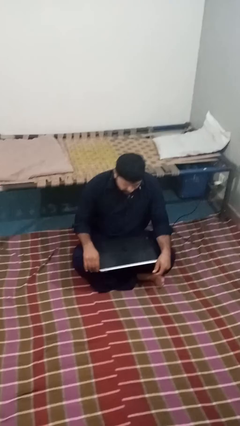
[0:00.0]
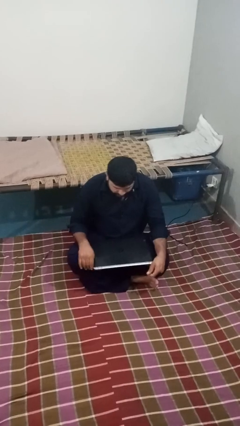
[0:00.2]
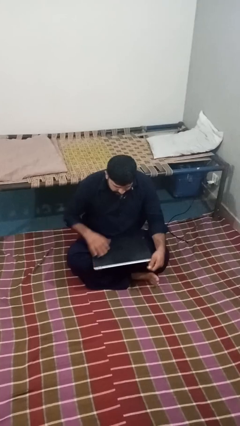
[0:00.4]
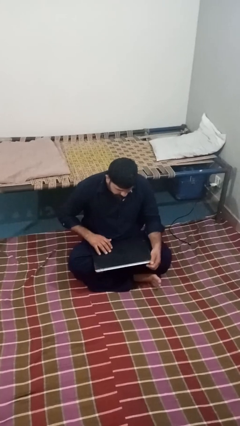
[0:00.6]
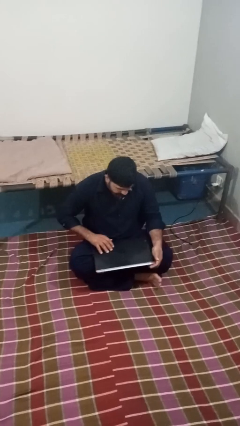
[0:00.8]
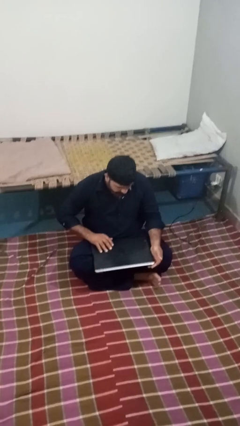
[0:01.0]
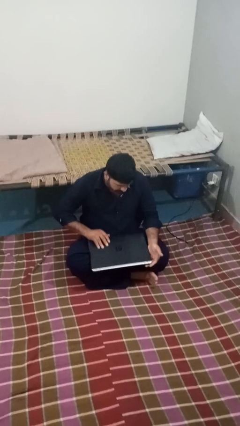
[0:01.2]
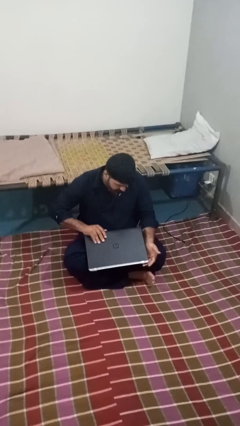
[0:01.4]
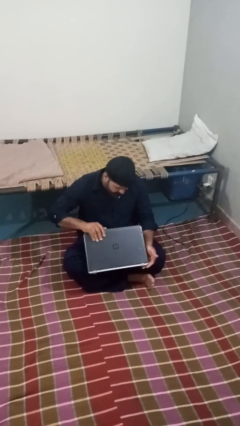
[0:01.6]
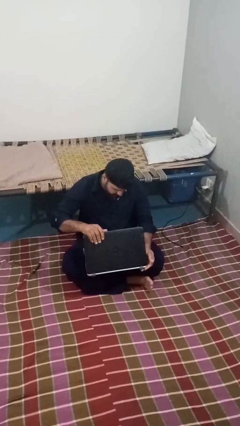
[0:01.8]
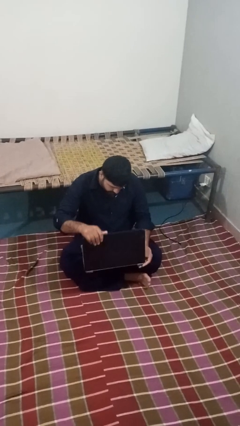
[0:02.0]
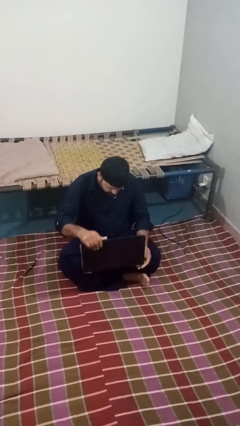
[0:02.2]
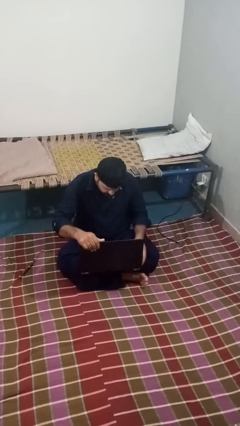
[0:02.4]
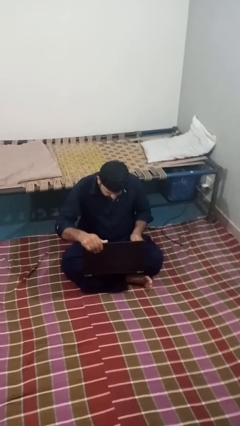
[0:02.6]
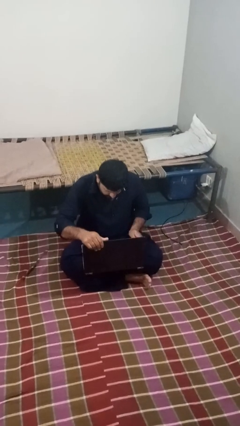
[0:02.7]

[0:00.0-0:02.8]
person opens laptop

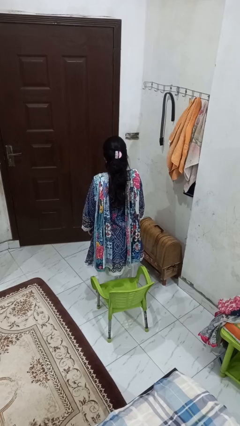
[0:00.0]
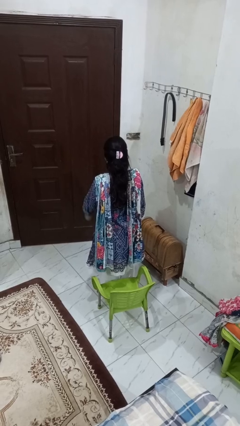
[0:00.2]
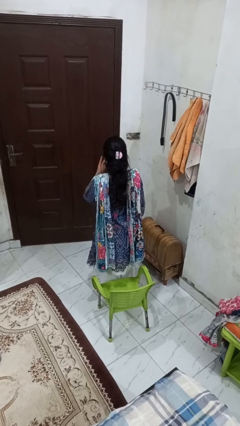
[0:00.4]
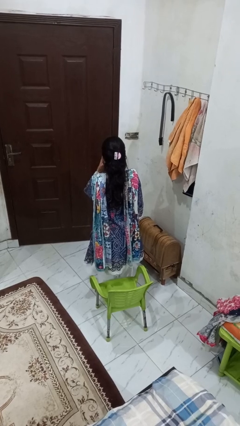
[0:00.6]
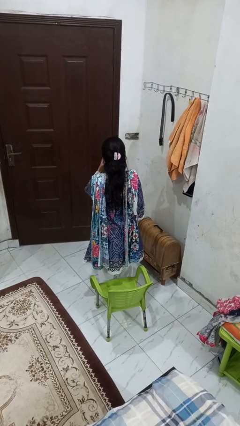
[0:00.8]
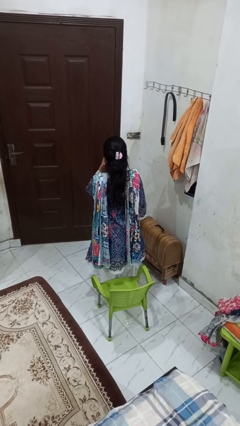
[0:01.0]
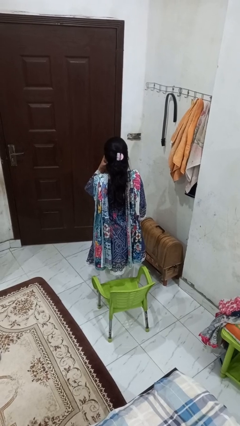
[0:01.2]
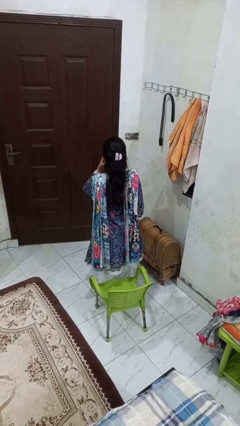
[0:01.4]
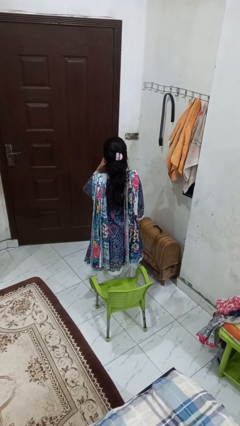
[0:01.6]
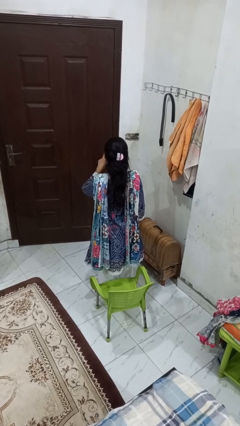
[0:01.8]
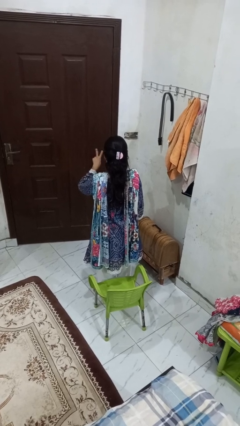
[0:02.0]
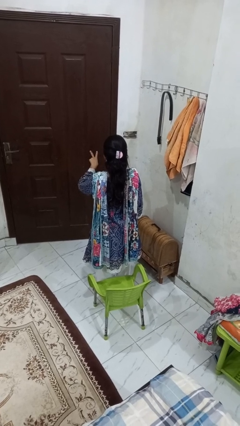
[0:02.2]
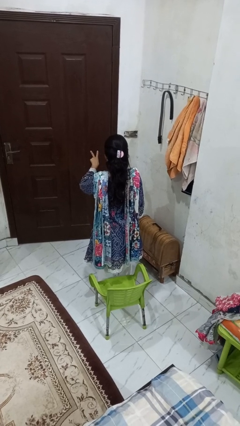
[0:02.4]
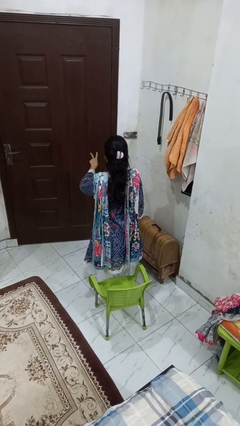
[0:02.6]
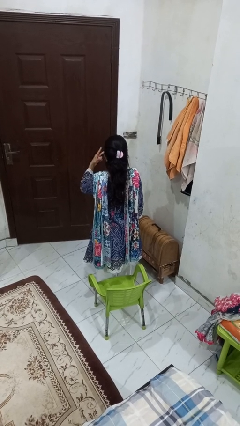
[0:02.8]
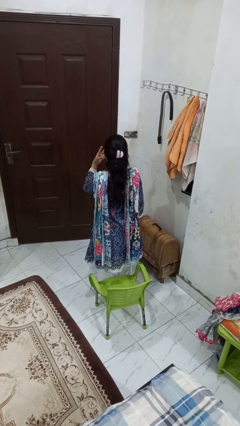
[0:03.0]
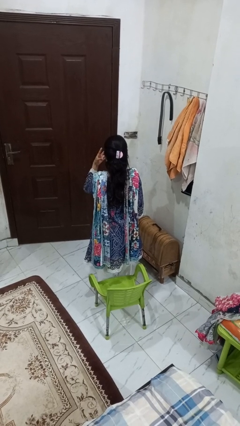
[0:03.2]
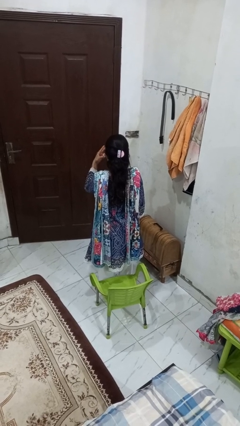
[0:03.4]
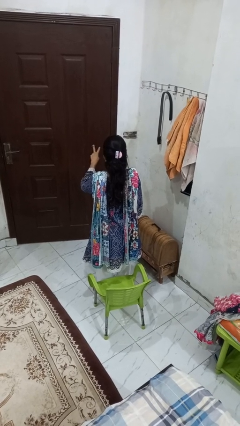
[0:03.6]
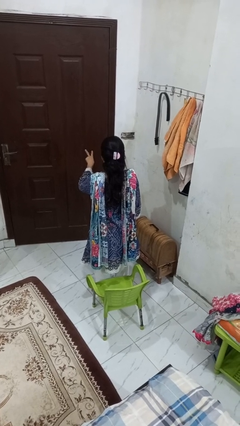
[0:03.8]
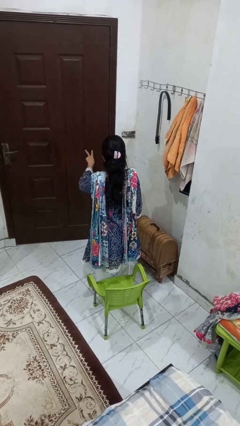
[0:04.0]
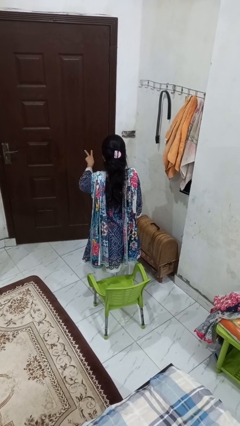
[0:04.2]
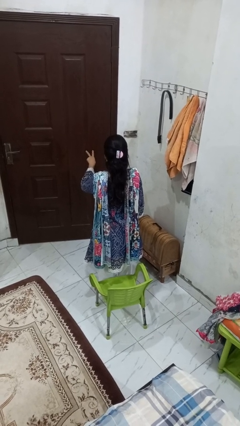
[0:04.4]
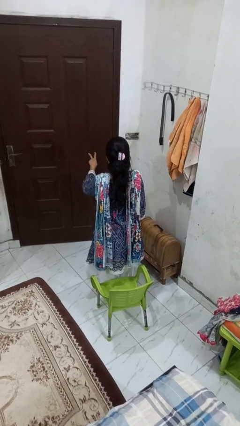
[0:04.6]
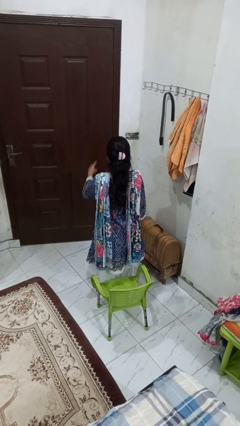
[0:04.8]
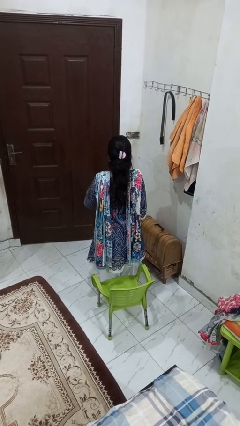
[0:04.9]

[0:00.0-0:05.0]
person gestures watch closely

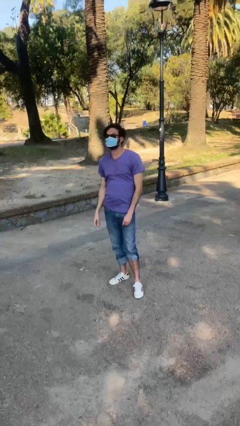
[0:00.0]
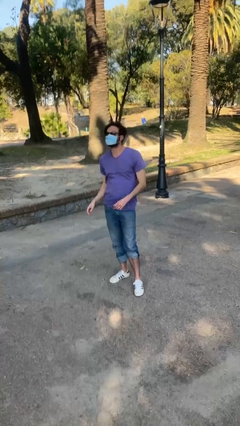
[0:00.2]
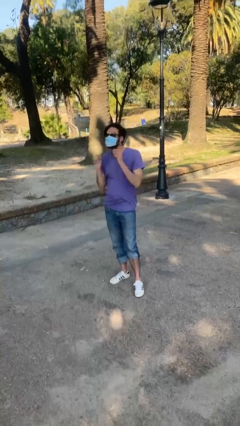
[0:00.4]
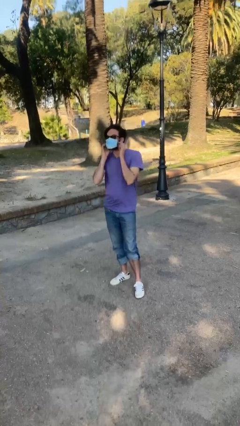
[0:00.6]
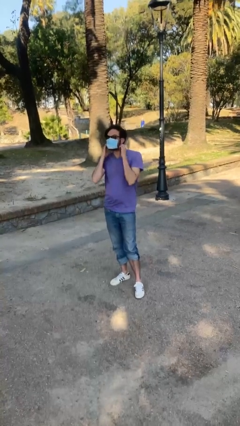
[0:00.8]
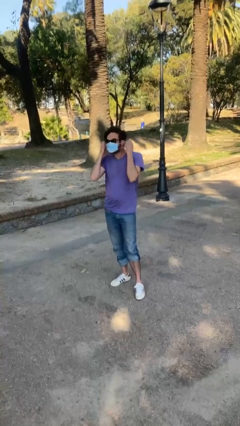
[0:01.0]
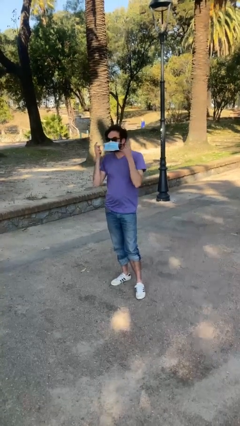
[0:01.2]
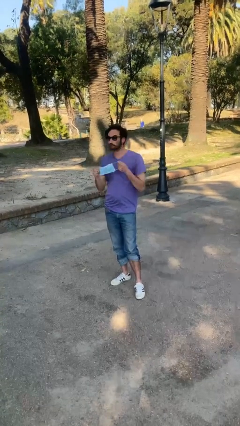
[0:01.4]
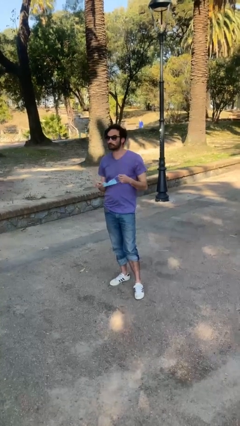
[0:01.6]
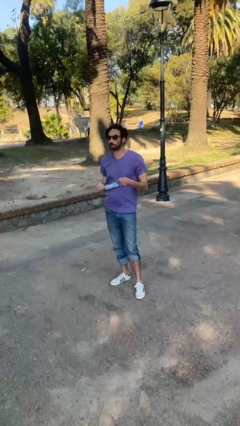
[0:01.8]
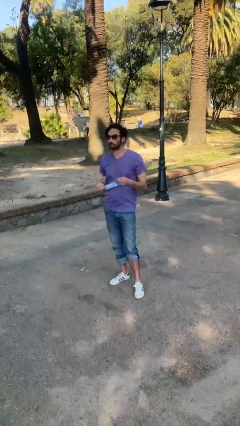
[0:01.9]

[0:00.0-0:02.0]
person takes off facemask

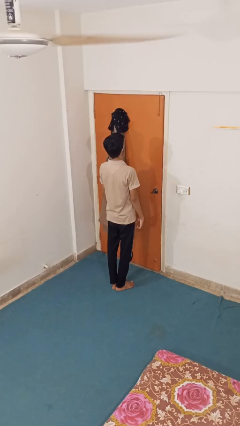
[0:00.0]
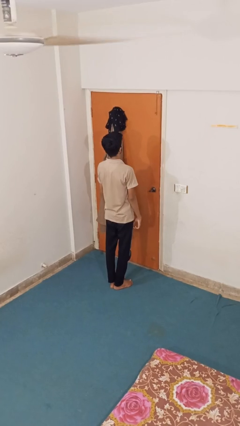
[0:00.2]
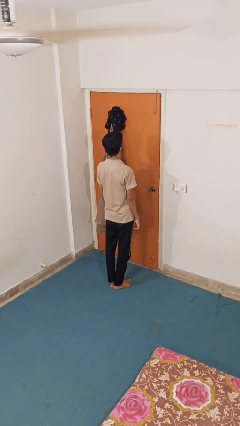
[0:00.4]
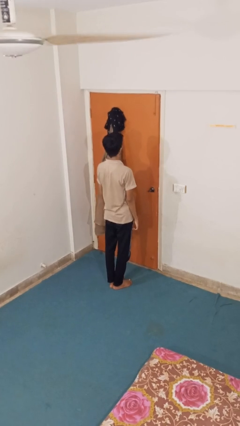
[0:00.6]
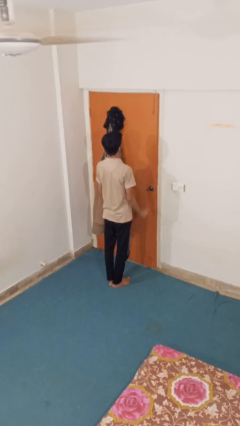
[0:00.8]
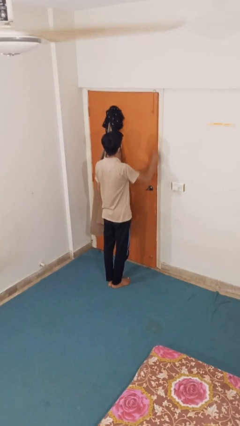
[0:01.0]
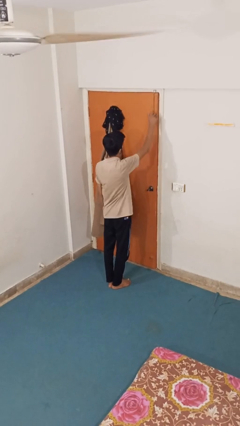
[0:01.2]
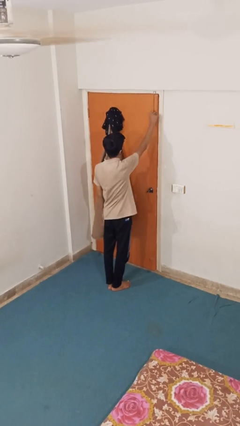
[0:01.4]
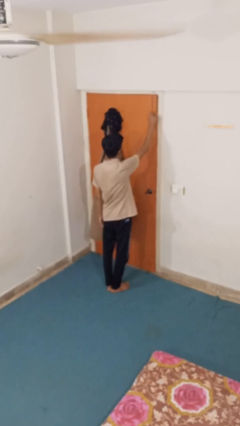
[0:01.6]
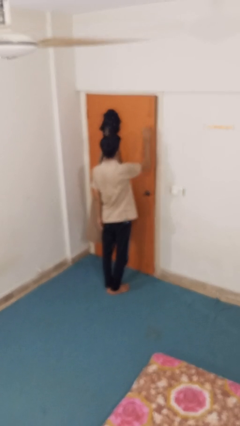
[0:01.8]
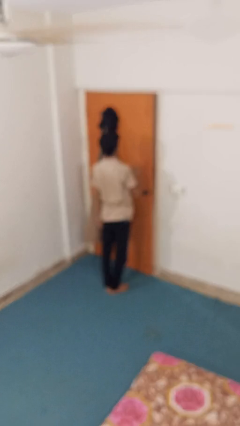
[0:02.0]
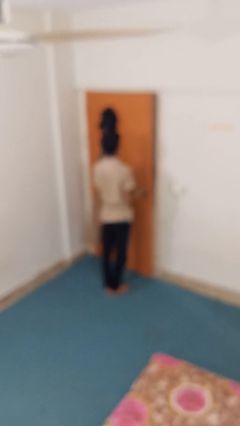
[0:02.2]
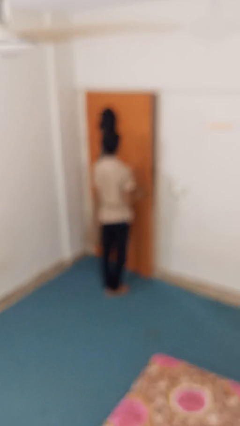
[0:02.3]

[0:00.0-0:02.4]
person unlocks door with keys

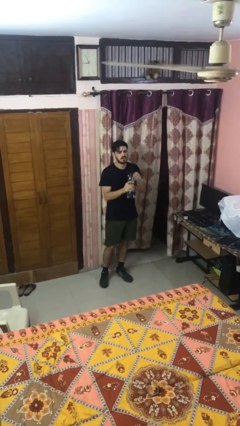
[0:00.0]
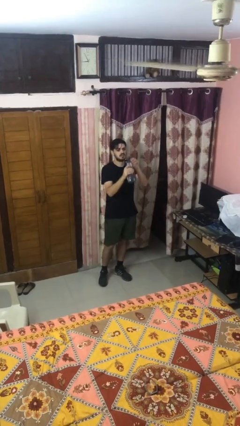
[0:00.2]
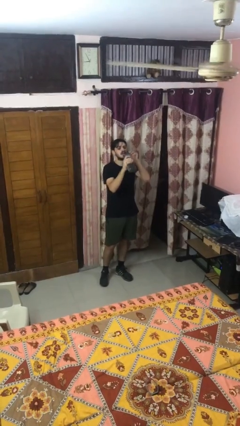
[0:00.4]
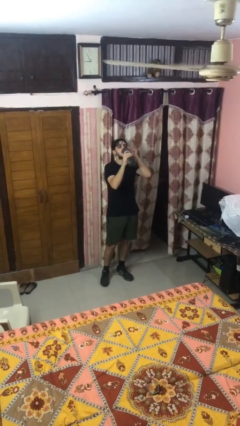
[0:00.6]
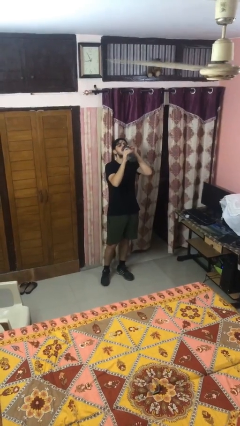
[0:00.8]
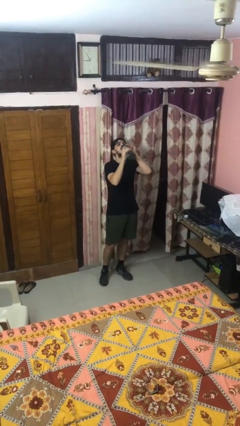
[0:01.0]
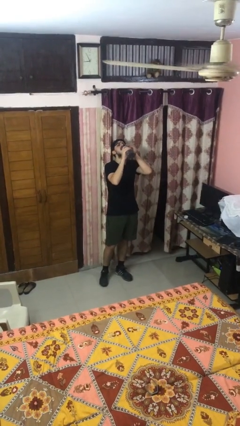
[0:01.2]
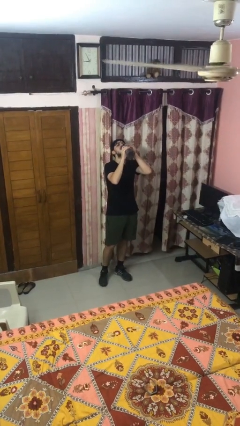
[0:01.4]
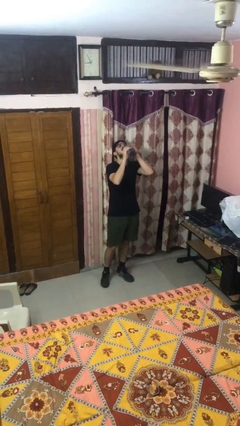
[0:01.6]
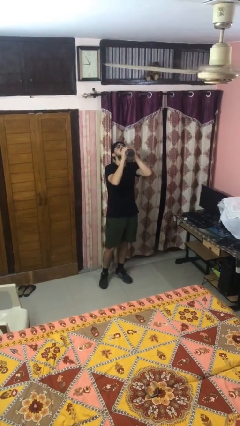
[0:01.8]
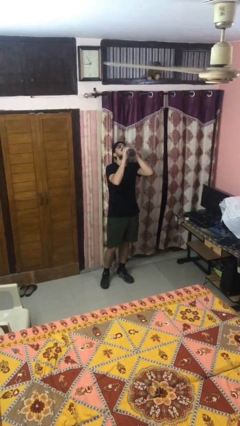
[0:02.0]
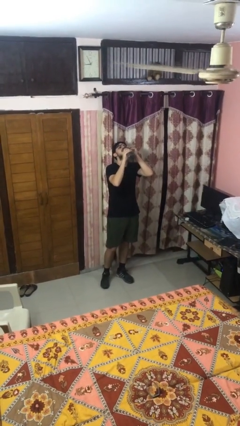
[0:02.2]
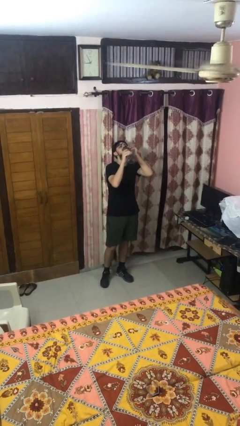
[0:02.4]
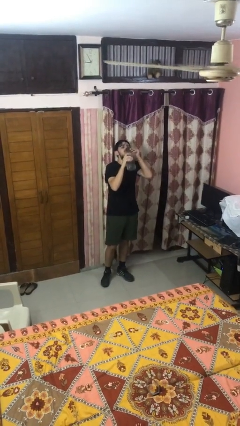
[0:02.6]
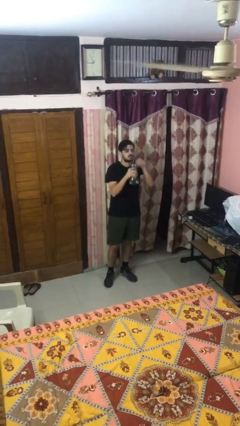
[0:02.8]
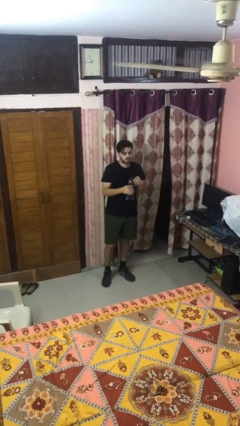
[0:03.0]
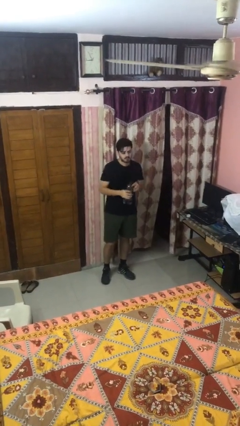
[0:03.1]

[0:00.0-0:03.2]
person drinks from bottle

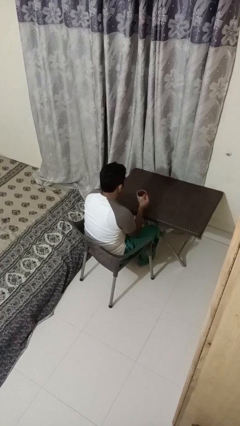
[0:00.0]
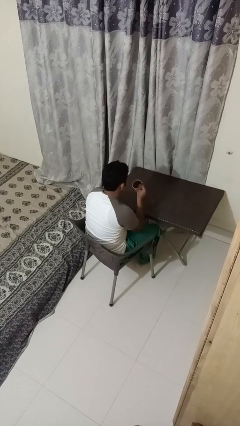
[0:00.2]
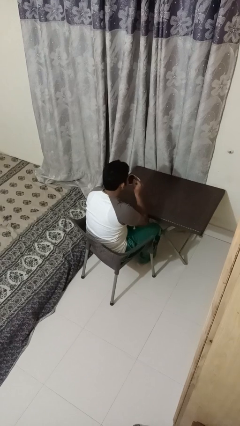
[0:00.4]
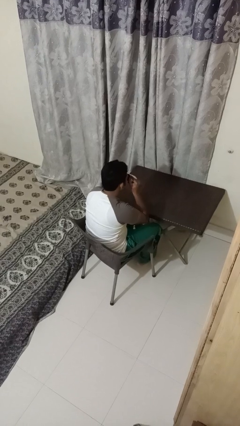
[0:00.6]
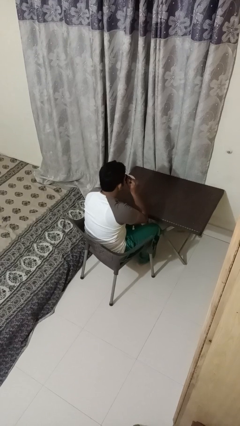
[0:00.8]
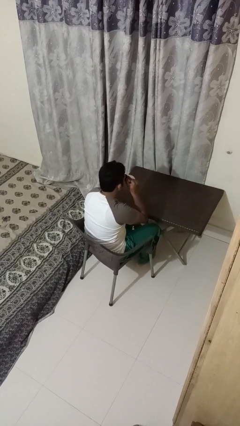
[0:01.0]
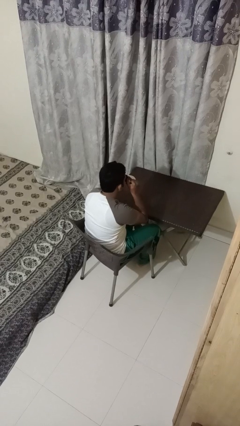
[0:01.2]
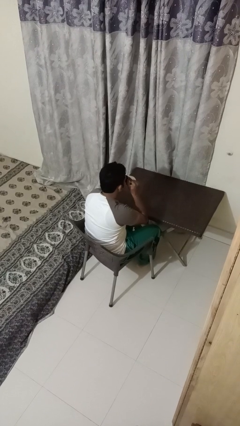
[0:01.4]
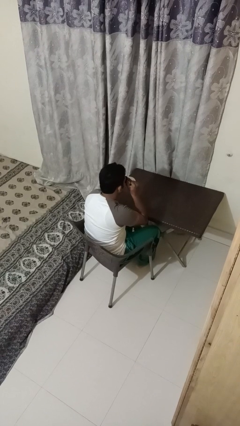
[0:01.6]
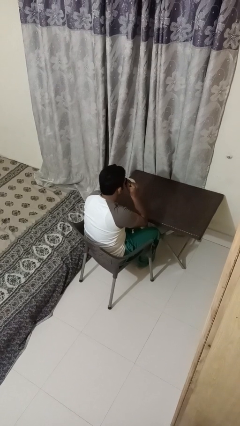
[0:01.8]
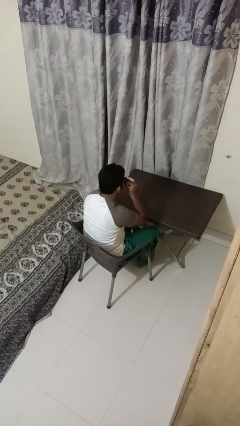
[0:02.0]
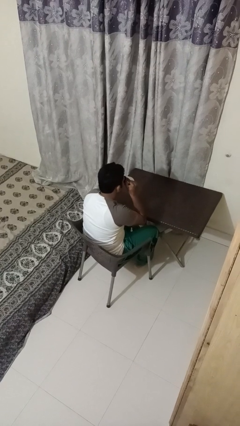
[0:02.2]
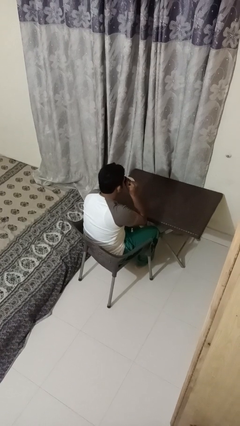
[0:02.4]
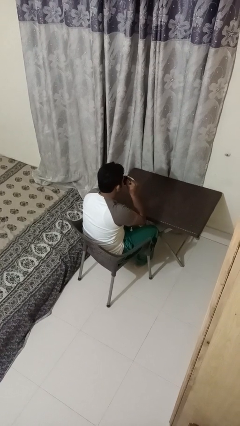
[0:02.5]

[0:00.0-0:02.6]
person drinks from mug
